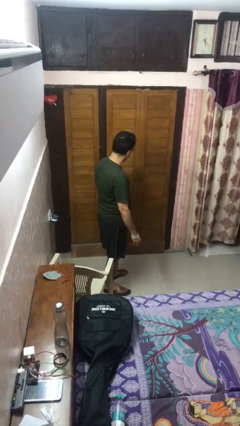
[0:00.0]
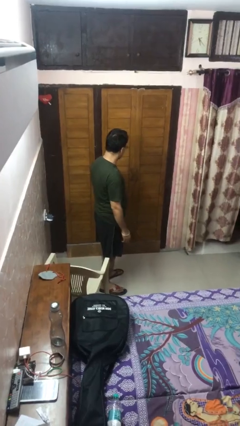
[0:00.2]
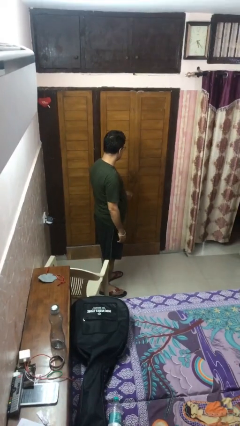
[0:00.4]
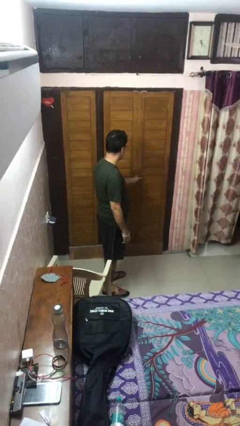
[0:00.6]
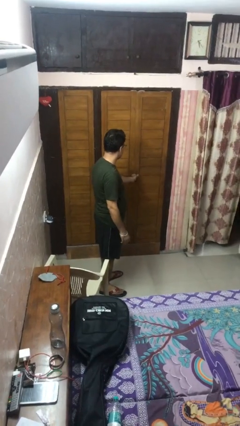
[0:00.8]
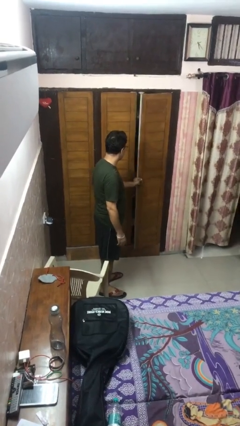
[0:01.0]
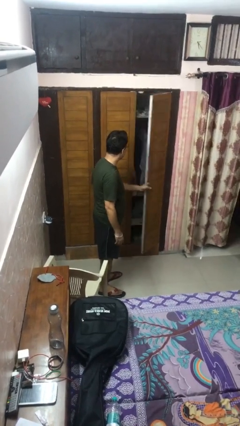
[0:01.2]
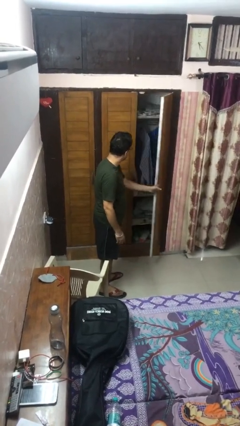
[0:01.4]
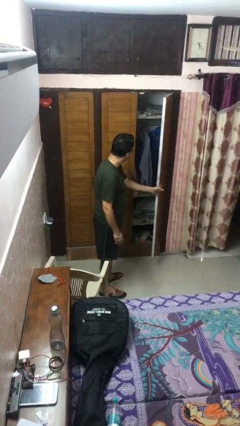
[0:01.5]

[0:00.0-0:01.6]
person opens closet door

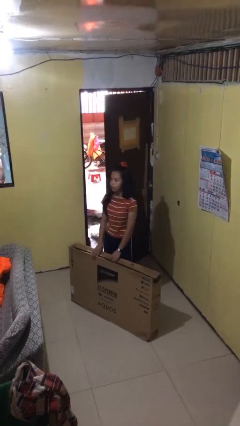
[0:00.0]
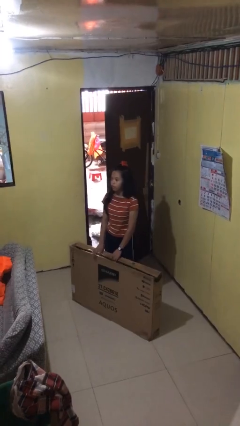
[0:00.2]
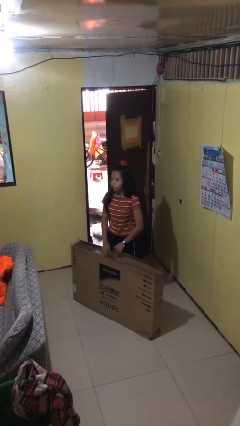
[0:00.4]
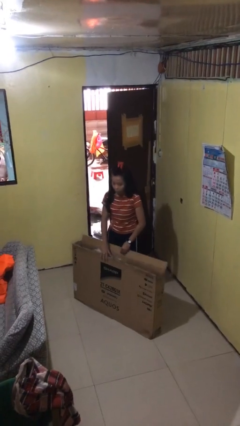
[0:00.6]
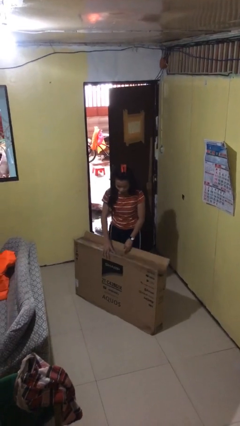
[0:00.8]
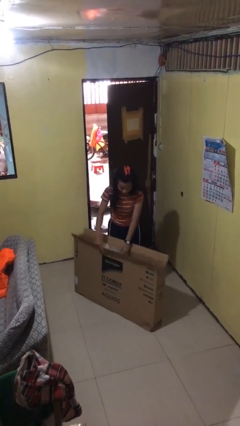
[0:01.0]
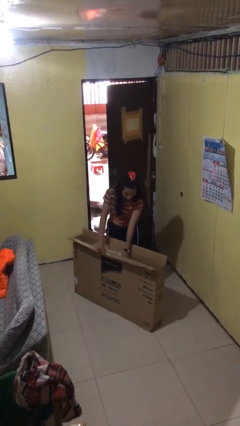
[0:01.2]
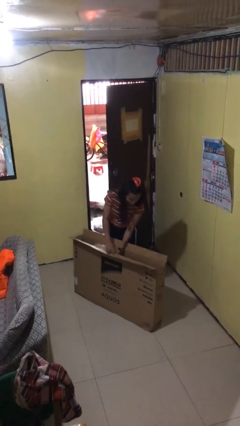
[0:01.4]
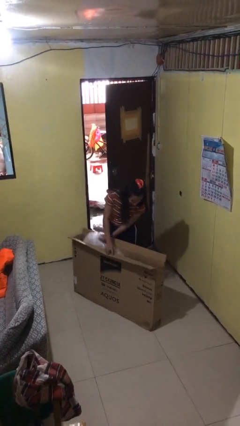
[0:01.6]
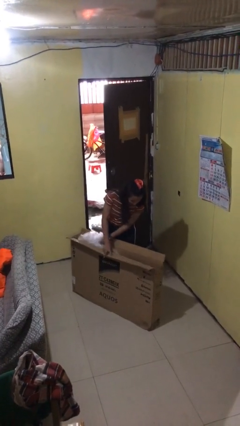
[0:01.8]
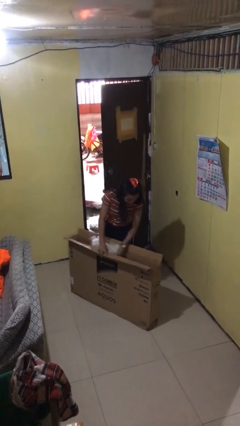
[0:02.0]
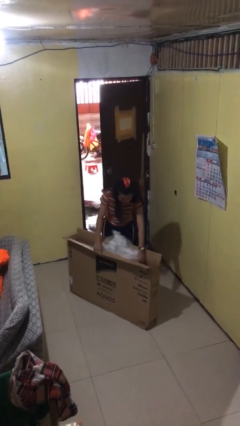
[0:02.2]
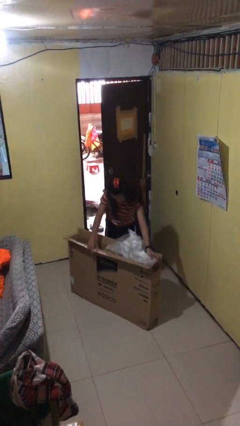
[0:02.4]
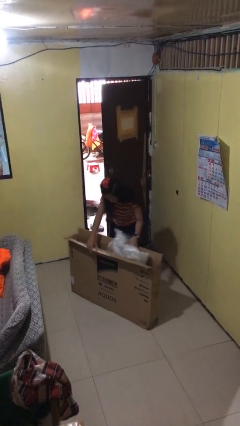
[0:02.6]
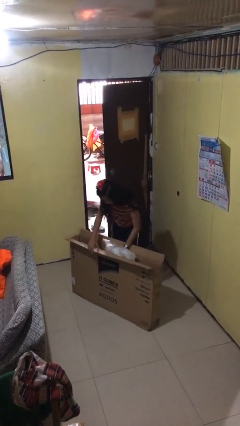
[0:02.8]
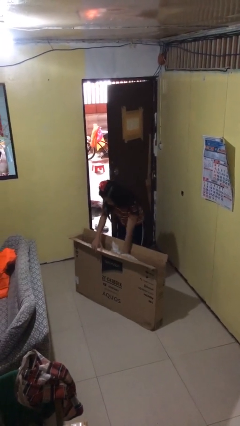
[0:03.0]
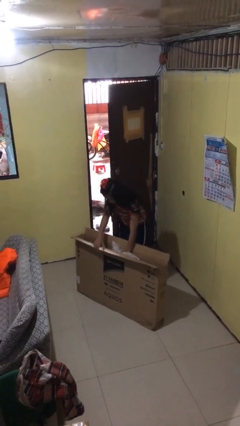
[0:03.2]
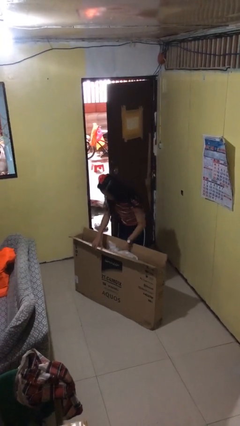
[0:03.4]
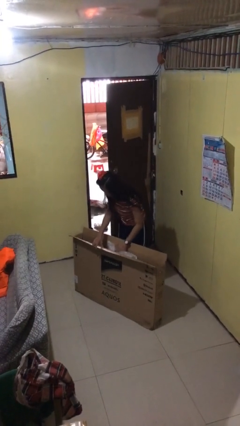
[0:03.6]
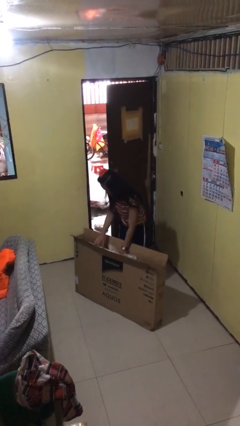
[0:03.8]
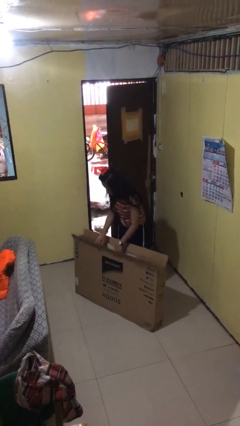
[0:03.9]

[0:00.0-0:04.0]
person searches in box

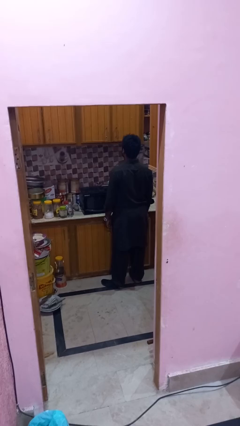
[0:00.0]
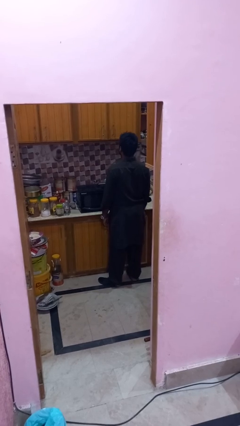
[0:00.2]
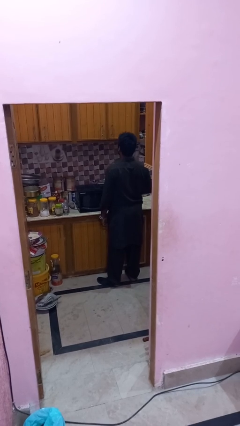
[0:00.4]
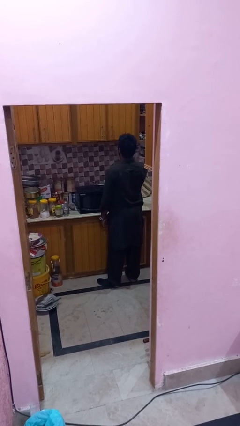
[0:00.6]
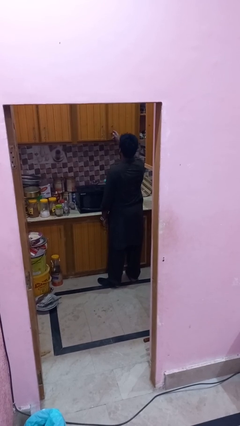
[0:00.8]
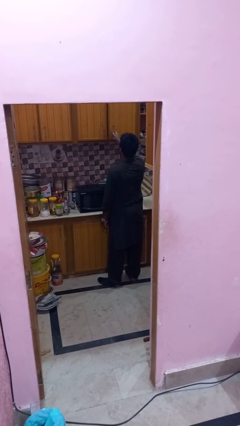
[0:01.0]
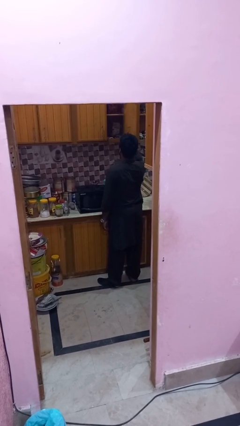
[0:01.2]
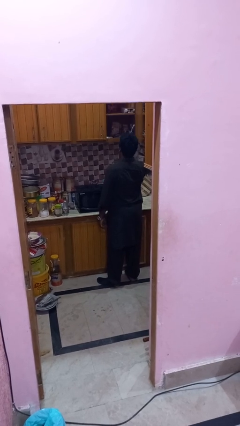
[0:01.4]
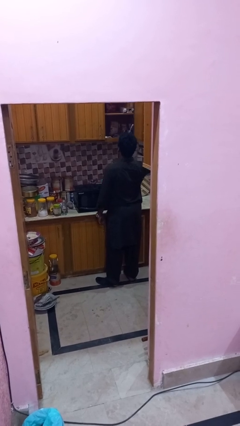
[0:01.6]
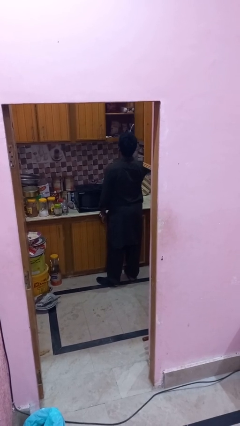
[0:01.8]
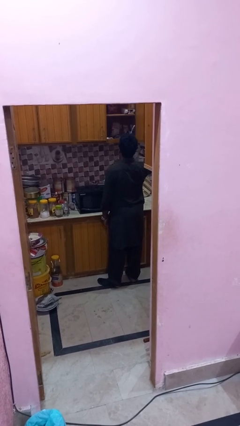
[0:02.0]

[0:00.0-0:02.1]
person opens cabinet

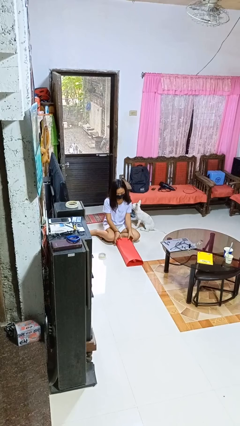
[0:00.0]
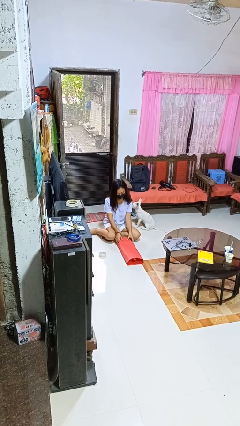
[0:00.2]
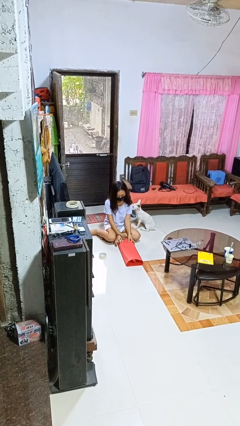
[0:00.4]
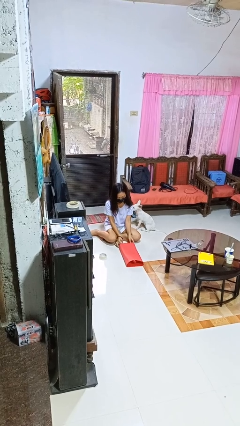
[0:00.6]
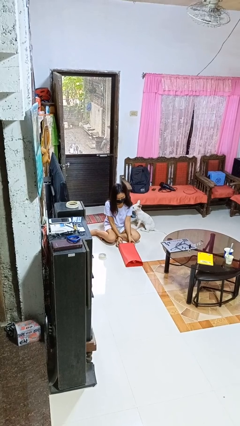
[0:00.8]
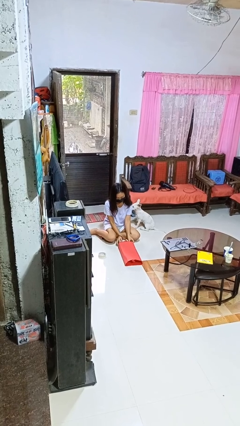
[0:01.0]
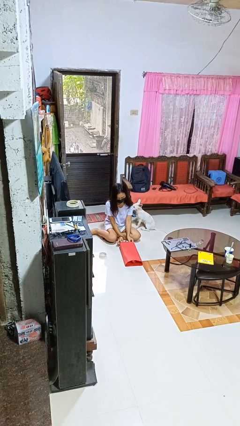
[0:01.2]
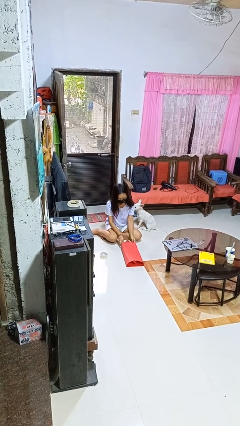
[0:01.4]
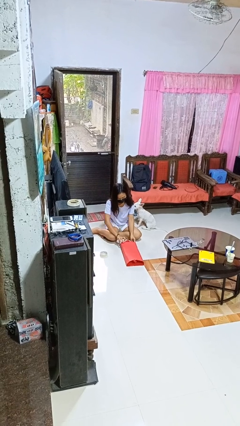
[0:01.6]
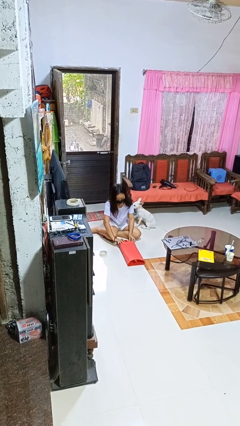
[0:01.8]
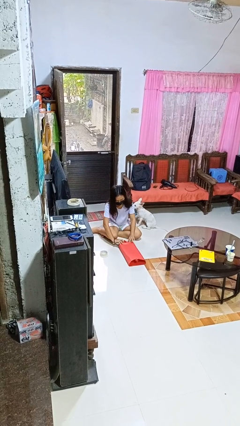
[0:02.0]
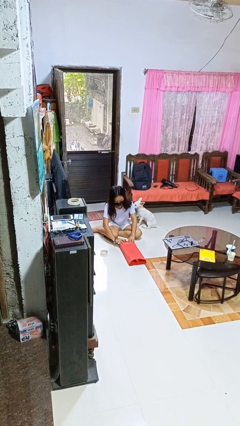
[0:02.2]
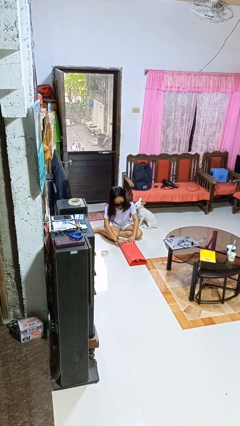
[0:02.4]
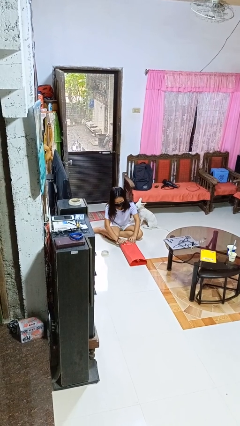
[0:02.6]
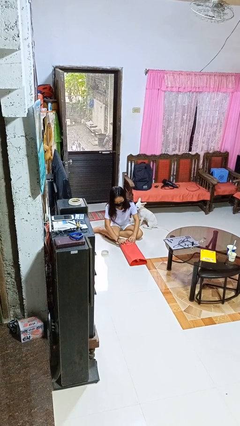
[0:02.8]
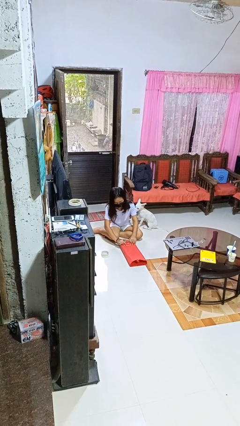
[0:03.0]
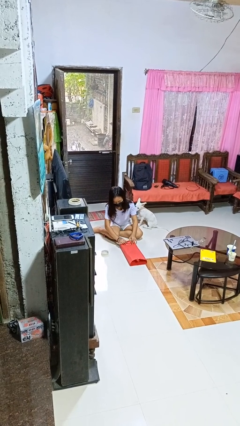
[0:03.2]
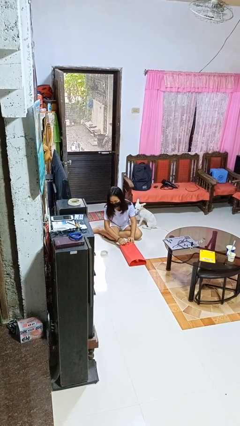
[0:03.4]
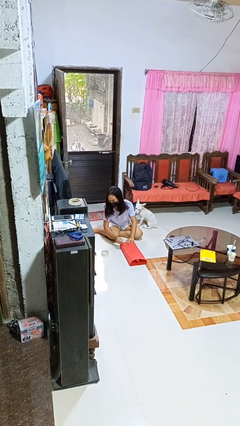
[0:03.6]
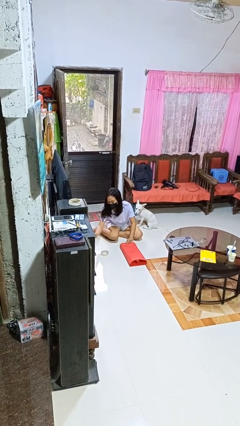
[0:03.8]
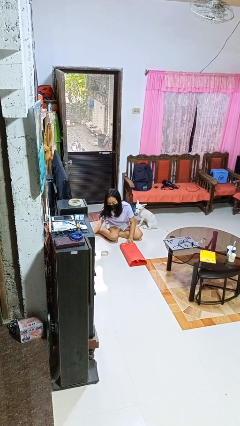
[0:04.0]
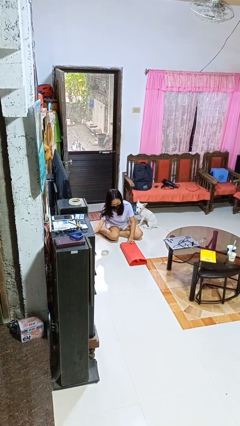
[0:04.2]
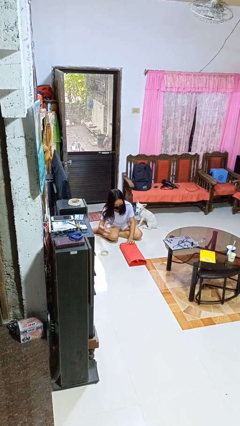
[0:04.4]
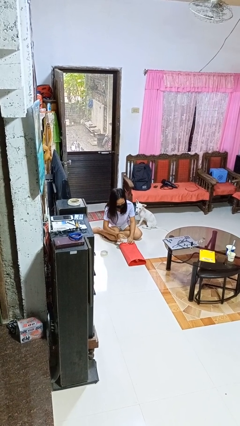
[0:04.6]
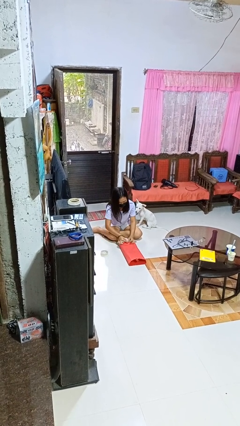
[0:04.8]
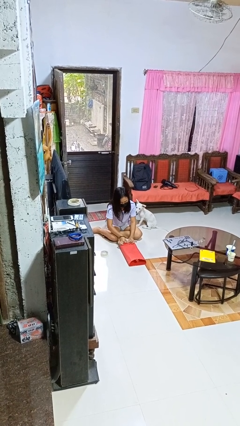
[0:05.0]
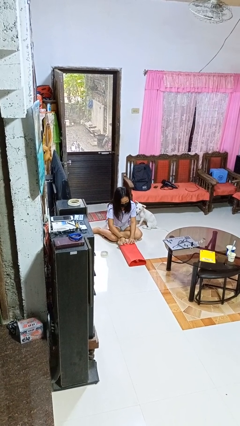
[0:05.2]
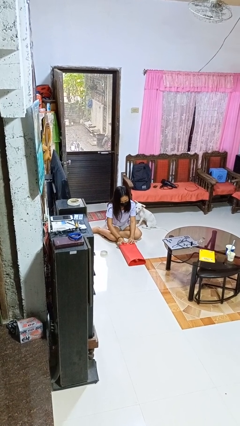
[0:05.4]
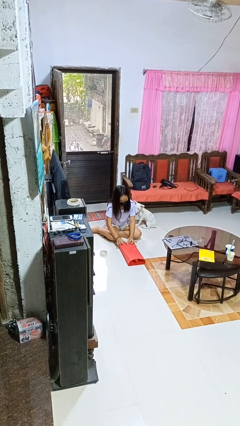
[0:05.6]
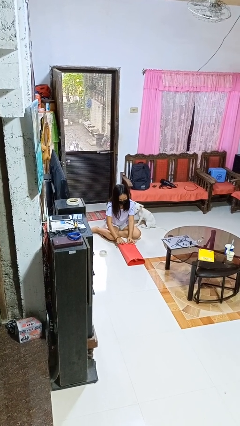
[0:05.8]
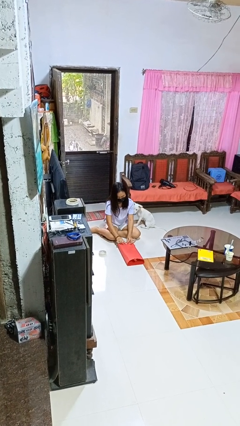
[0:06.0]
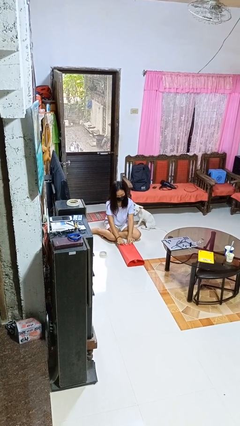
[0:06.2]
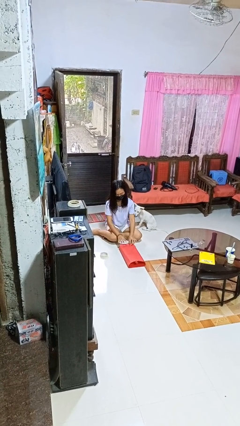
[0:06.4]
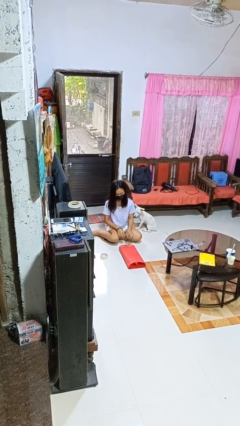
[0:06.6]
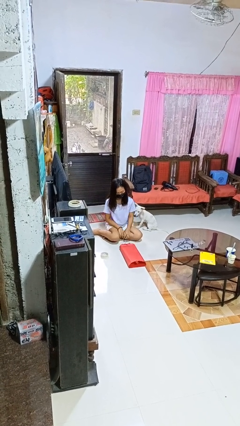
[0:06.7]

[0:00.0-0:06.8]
person wraps box

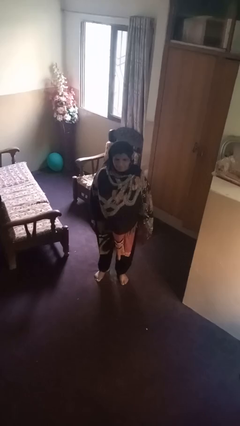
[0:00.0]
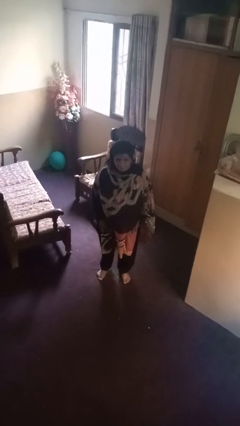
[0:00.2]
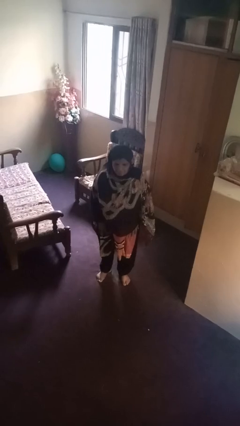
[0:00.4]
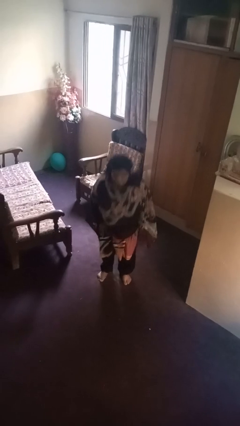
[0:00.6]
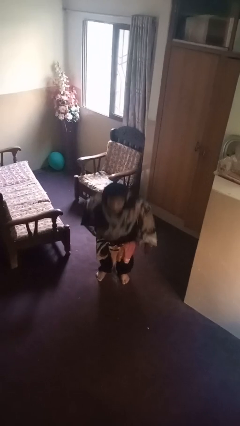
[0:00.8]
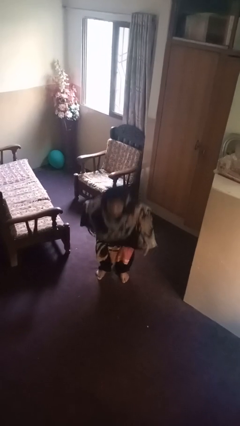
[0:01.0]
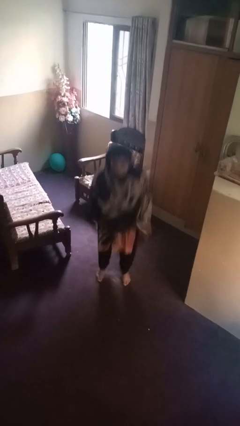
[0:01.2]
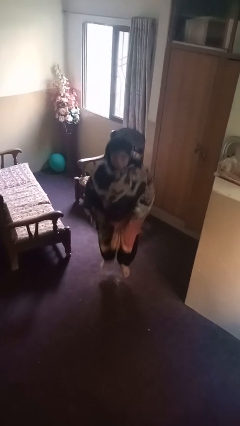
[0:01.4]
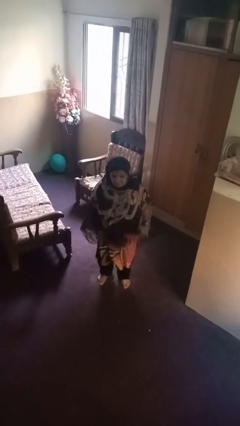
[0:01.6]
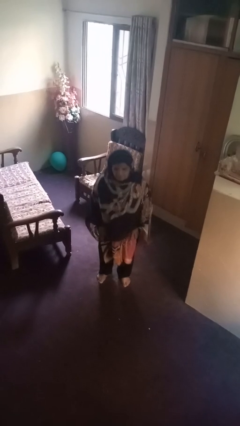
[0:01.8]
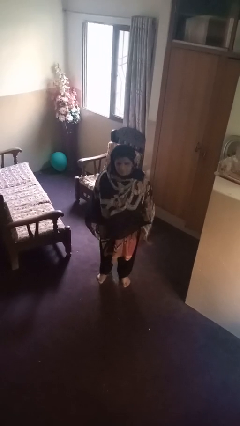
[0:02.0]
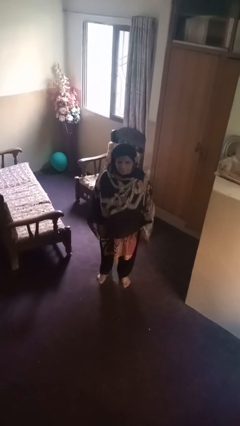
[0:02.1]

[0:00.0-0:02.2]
person jumps

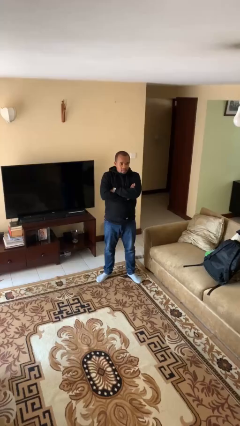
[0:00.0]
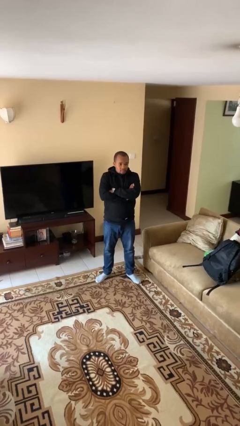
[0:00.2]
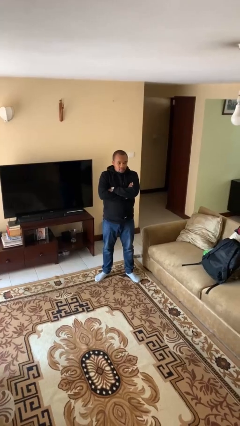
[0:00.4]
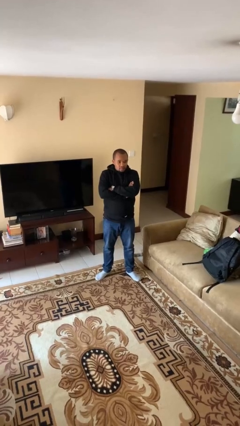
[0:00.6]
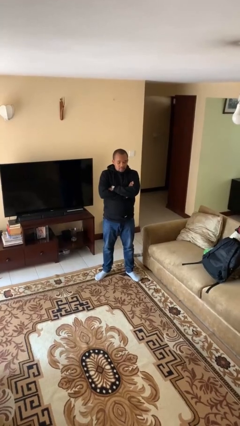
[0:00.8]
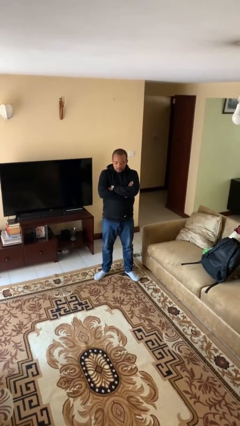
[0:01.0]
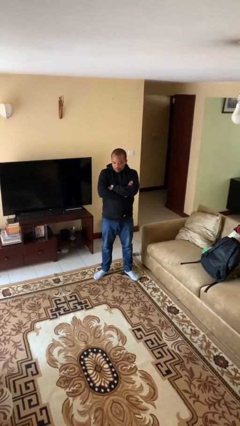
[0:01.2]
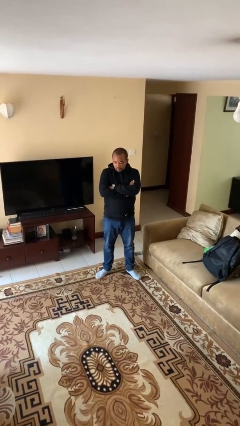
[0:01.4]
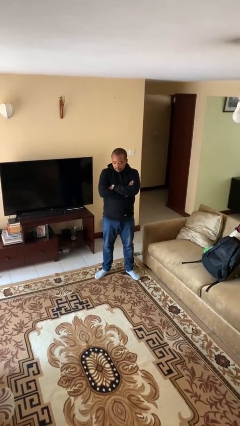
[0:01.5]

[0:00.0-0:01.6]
person crosses arms
